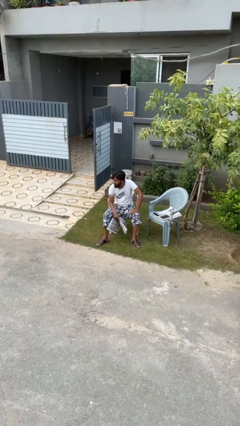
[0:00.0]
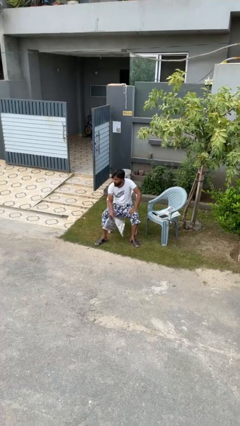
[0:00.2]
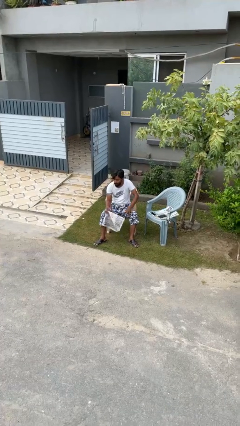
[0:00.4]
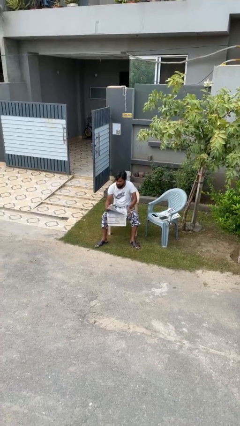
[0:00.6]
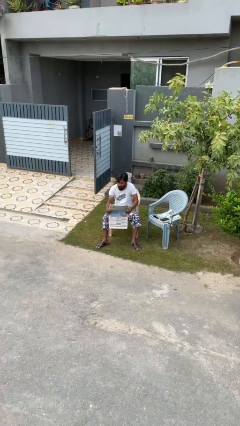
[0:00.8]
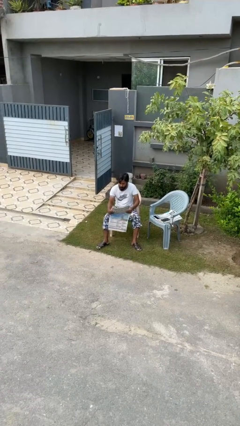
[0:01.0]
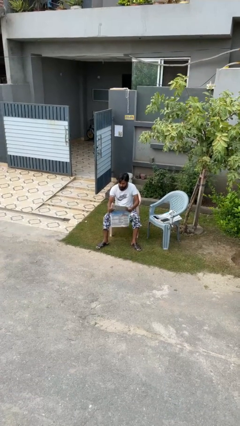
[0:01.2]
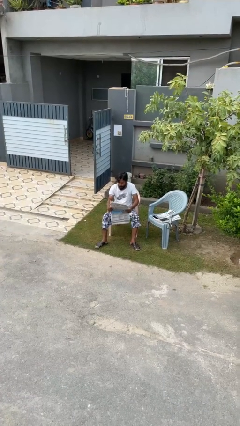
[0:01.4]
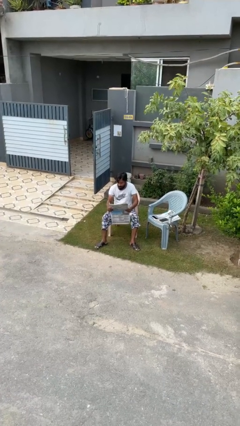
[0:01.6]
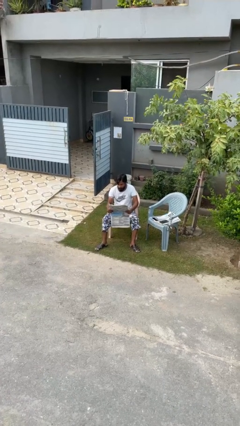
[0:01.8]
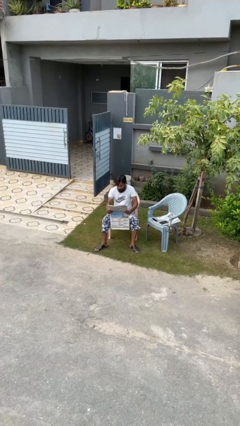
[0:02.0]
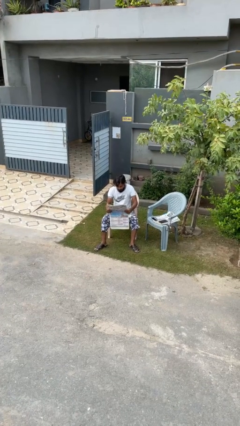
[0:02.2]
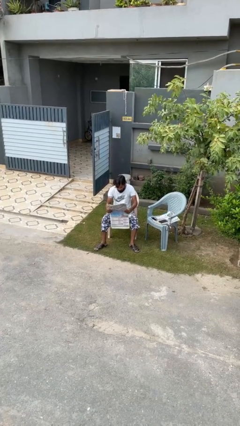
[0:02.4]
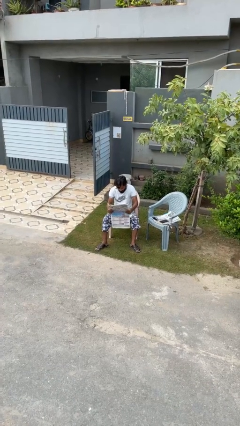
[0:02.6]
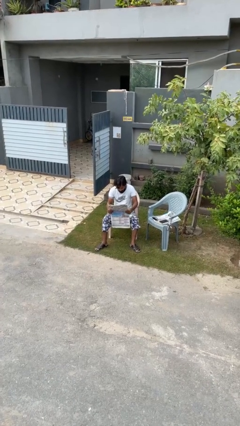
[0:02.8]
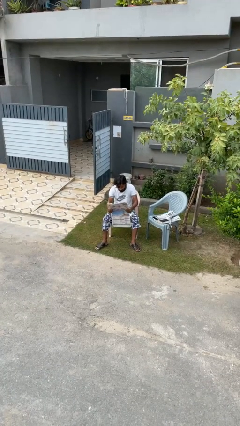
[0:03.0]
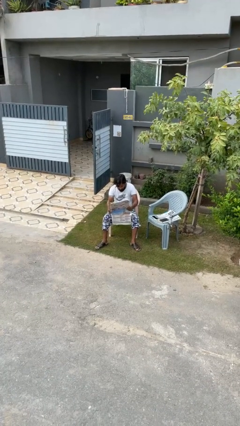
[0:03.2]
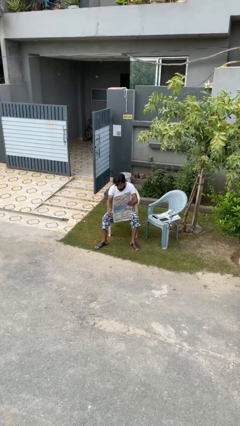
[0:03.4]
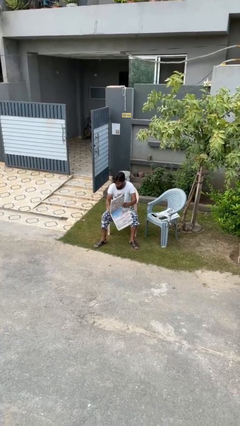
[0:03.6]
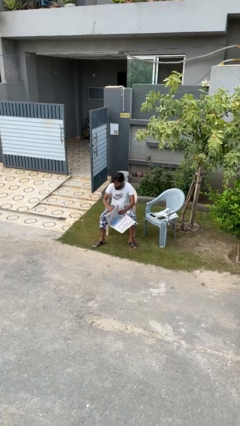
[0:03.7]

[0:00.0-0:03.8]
person reads newspaper

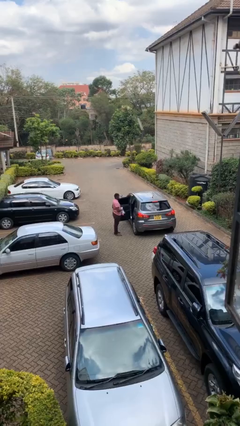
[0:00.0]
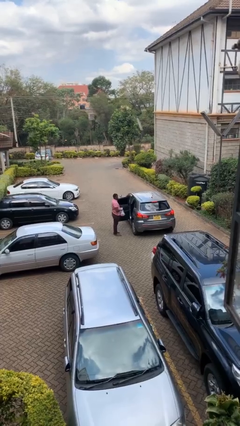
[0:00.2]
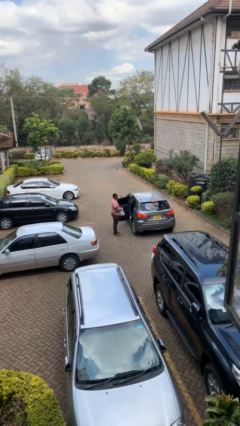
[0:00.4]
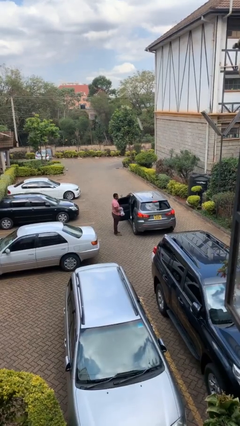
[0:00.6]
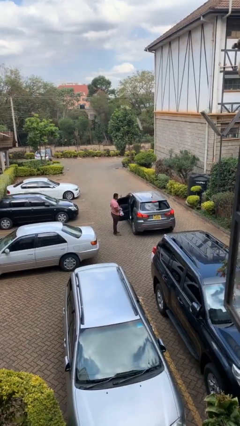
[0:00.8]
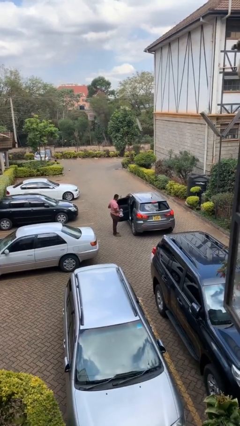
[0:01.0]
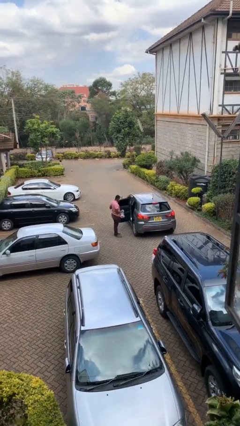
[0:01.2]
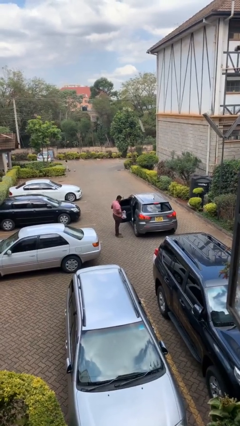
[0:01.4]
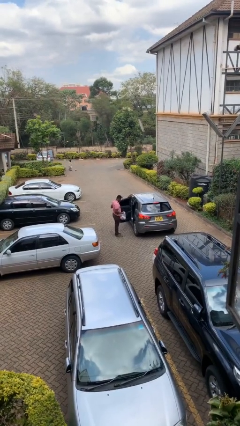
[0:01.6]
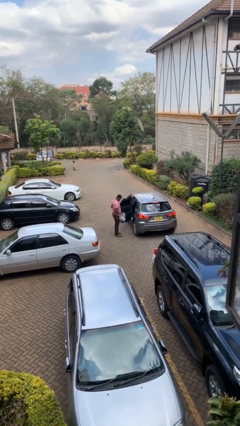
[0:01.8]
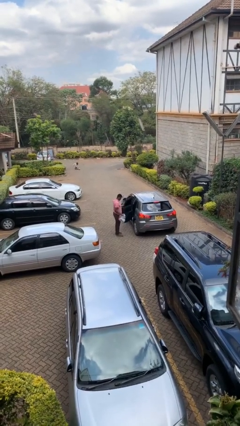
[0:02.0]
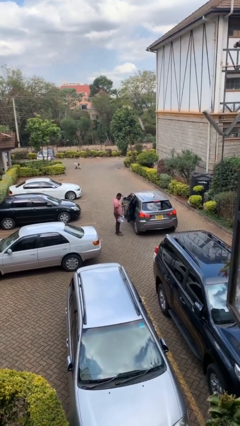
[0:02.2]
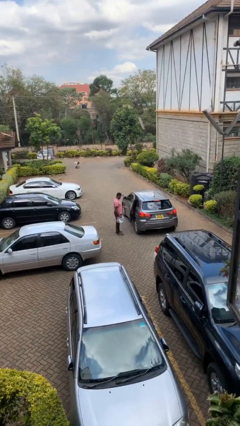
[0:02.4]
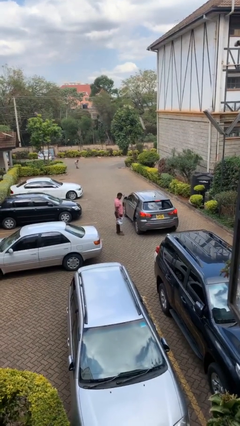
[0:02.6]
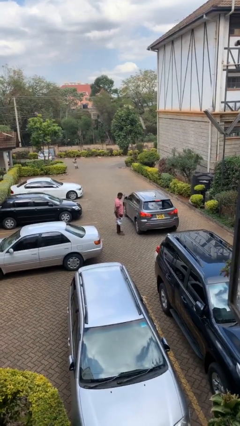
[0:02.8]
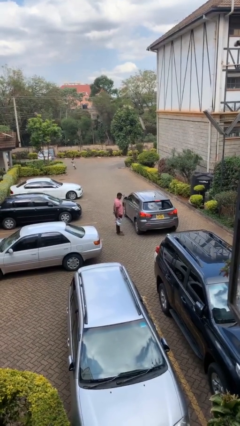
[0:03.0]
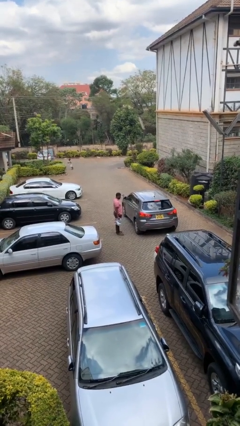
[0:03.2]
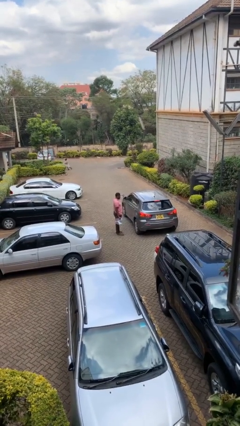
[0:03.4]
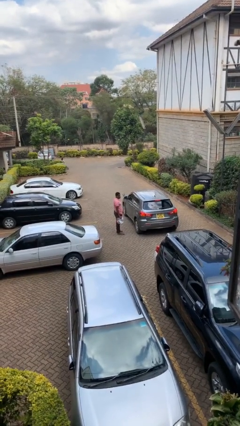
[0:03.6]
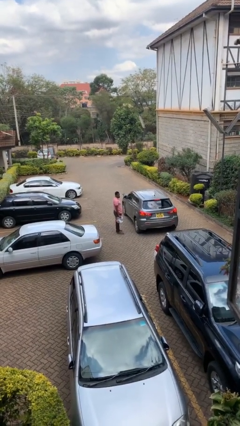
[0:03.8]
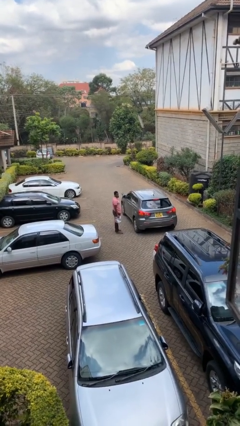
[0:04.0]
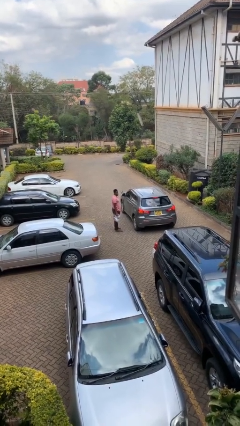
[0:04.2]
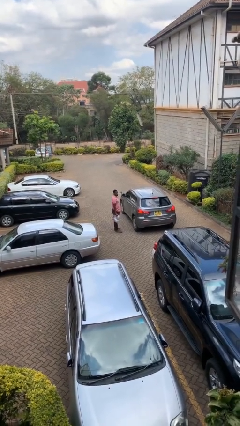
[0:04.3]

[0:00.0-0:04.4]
person closes car door

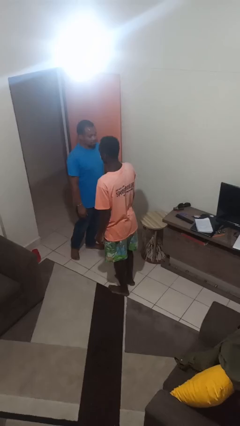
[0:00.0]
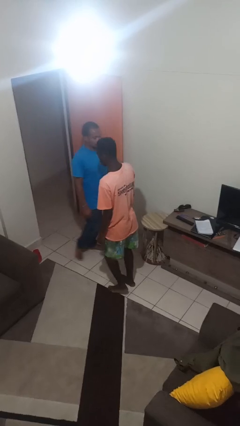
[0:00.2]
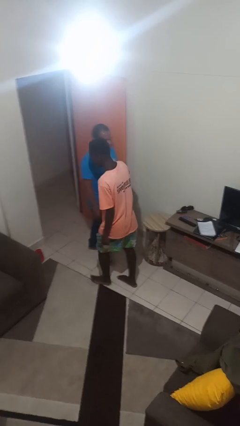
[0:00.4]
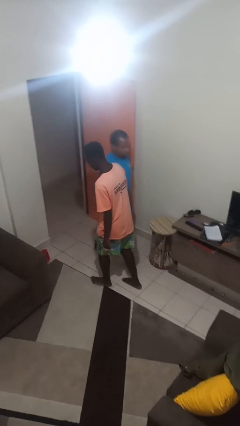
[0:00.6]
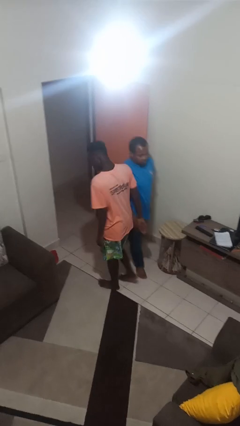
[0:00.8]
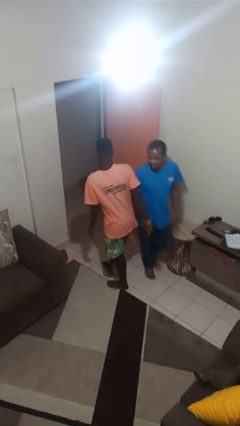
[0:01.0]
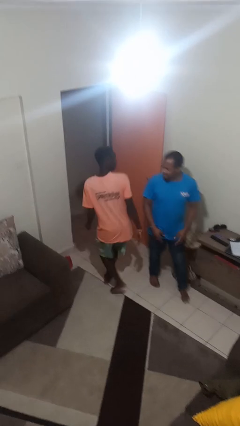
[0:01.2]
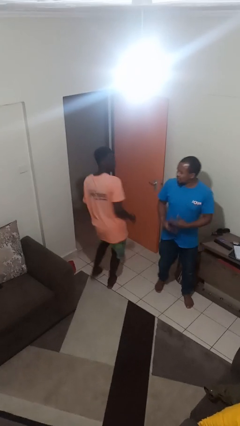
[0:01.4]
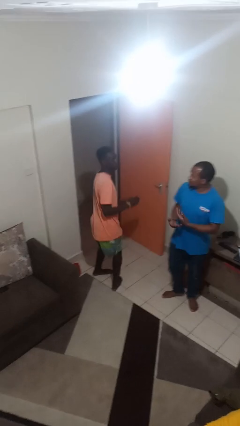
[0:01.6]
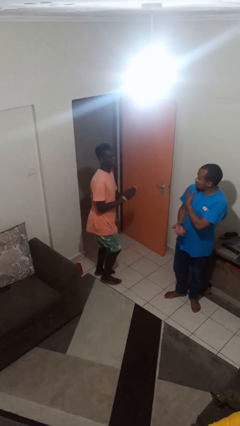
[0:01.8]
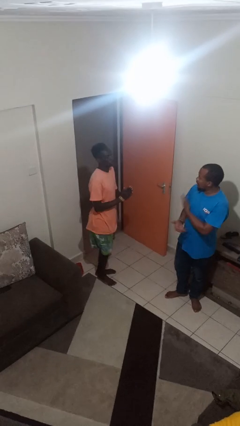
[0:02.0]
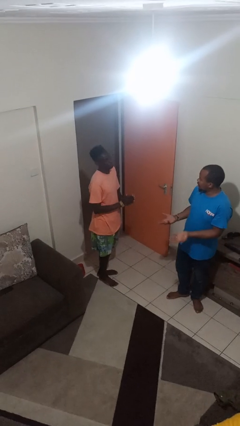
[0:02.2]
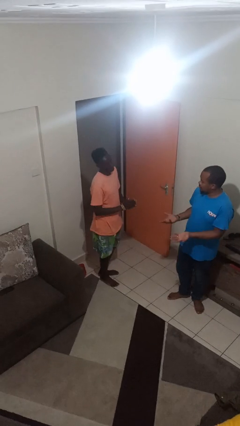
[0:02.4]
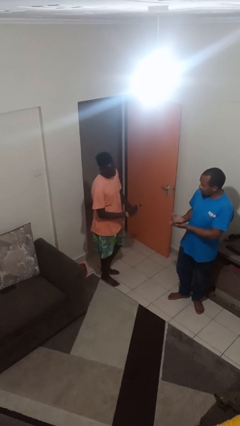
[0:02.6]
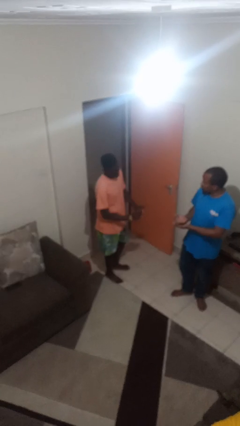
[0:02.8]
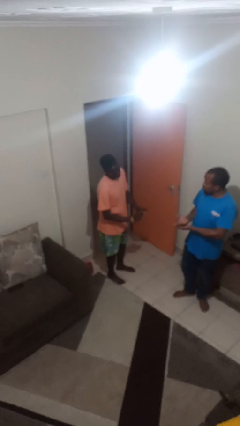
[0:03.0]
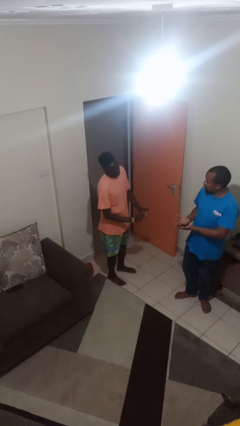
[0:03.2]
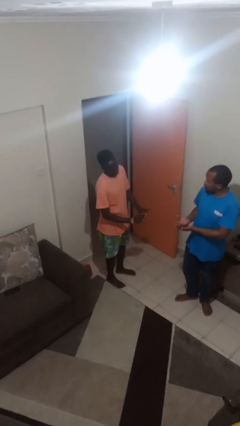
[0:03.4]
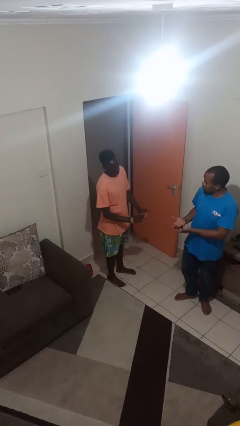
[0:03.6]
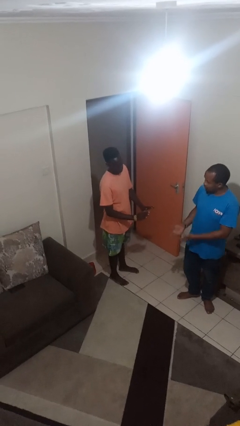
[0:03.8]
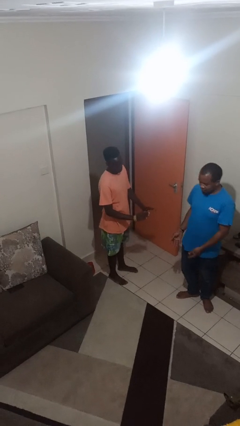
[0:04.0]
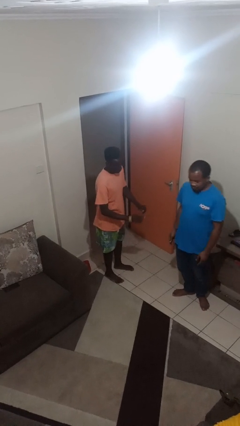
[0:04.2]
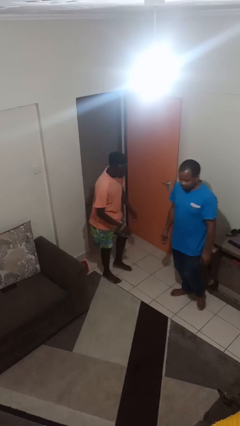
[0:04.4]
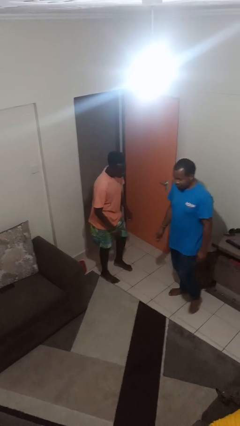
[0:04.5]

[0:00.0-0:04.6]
person bumps into person

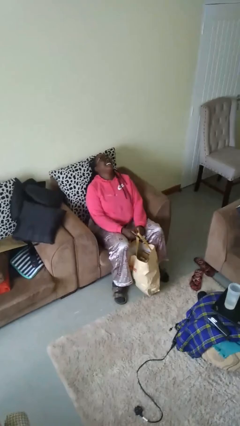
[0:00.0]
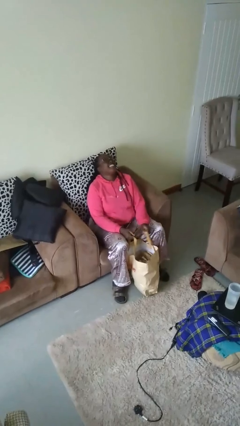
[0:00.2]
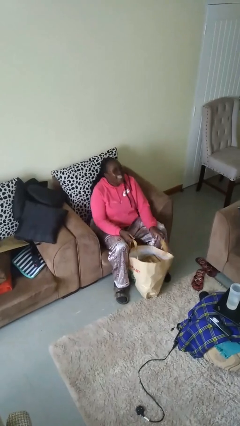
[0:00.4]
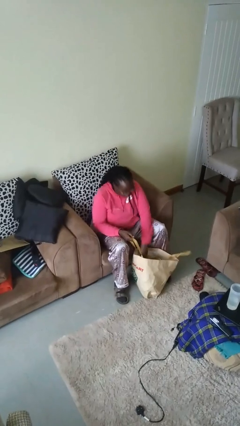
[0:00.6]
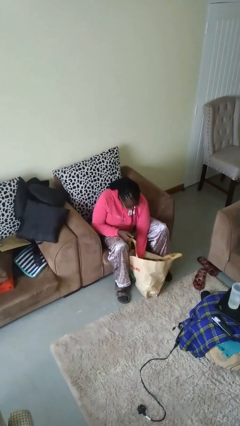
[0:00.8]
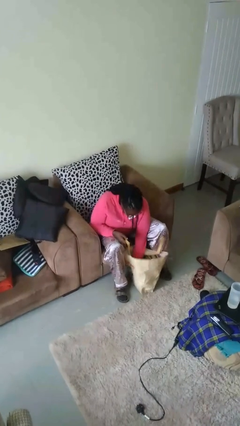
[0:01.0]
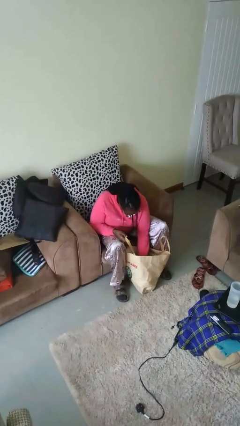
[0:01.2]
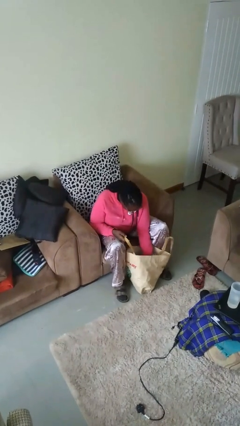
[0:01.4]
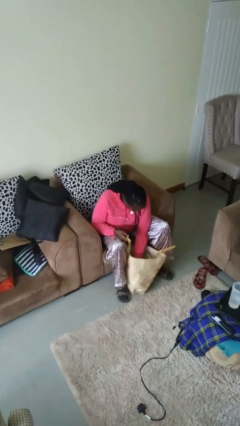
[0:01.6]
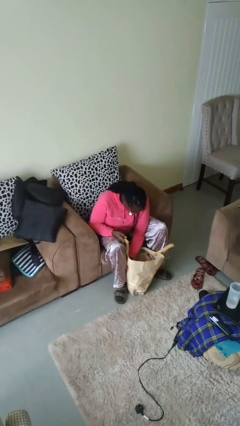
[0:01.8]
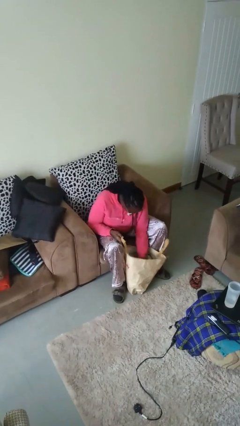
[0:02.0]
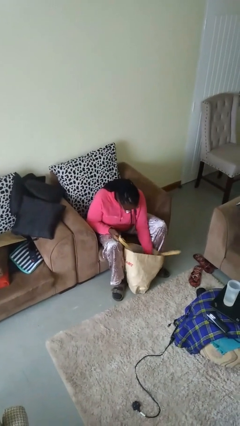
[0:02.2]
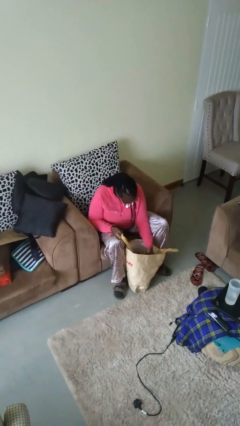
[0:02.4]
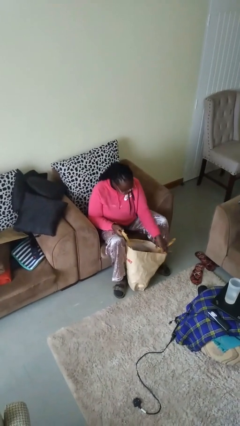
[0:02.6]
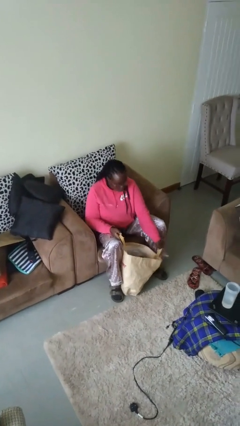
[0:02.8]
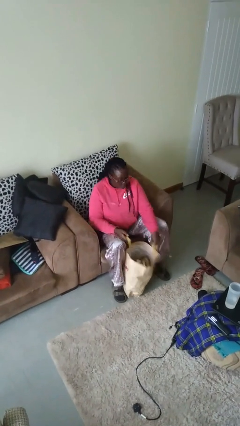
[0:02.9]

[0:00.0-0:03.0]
person searches in bag

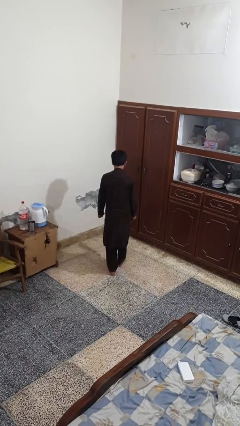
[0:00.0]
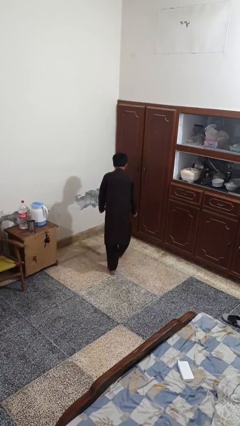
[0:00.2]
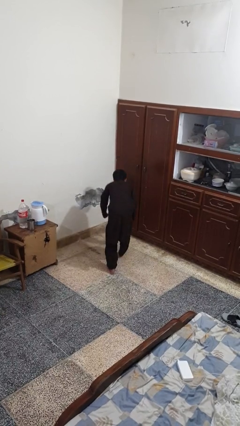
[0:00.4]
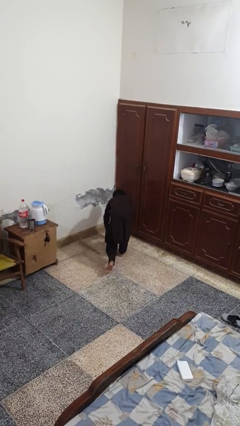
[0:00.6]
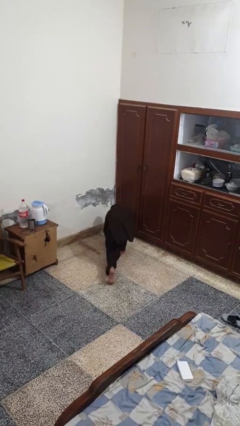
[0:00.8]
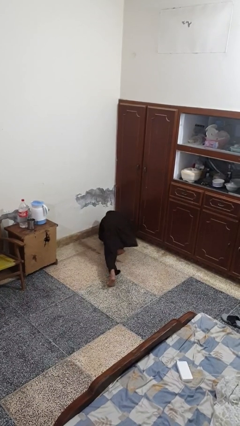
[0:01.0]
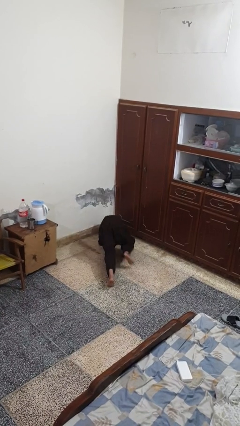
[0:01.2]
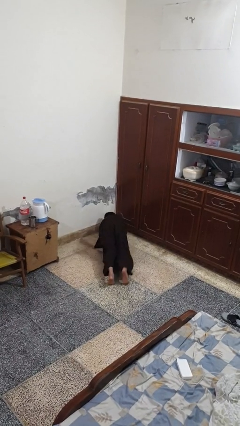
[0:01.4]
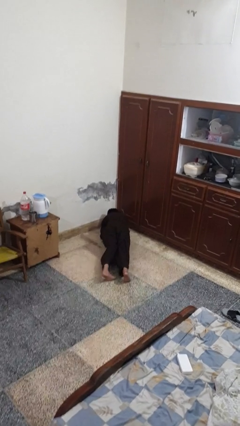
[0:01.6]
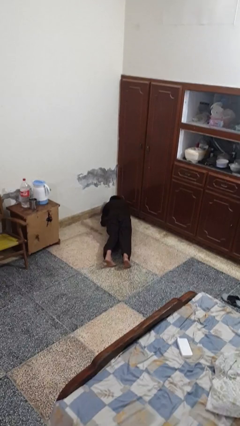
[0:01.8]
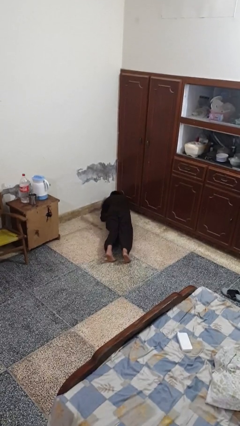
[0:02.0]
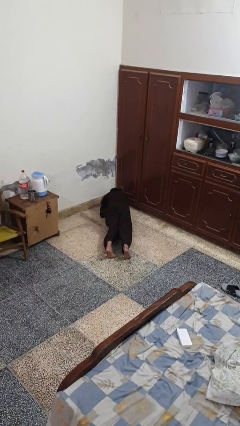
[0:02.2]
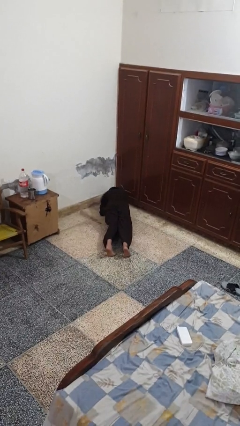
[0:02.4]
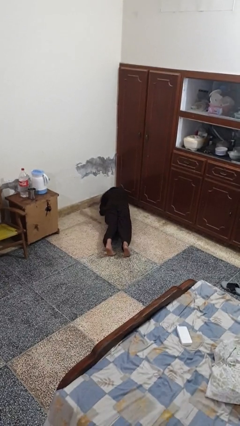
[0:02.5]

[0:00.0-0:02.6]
person exercises with plank
